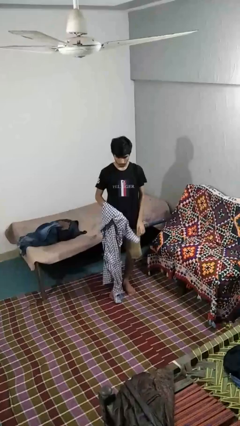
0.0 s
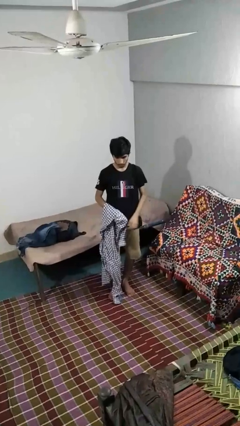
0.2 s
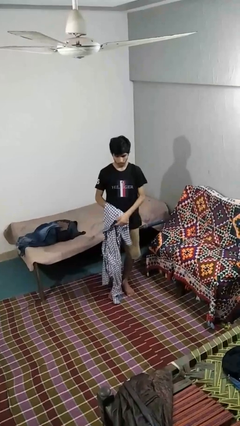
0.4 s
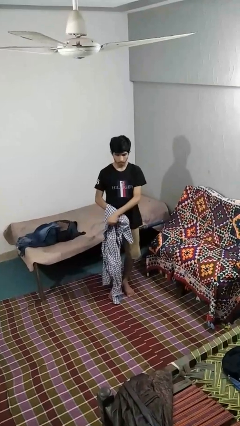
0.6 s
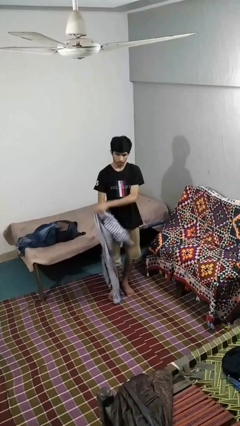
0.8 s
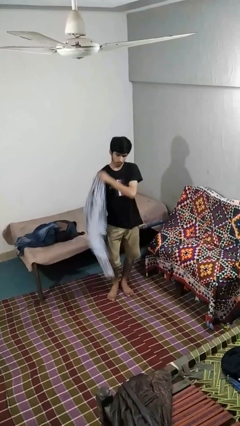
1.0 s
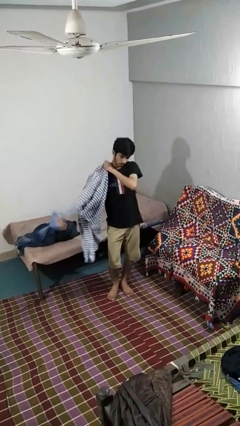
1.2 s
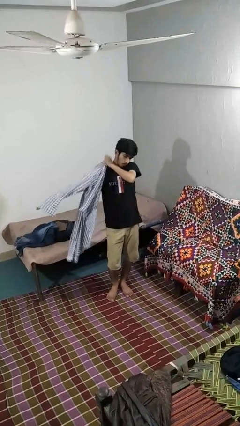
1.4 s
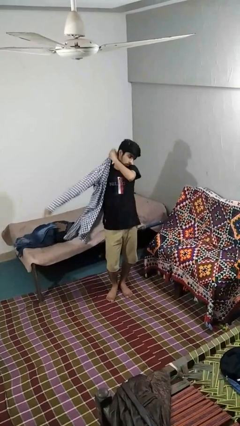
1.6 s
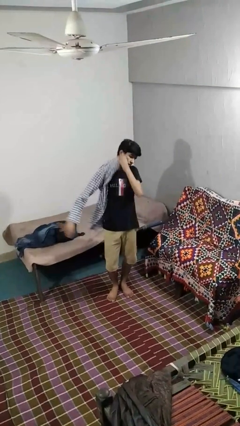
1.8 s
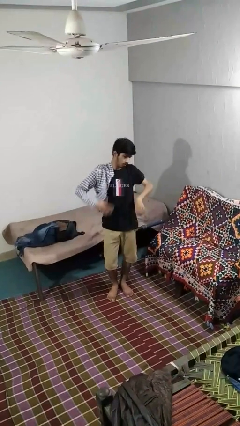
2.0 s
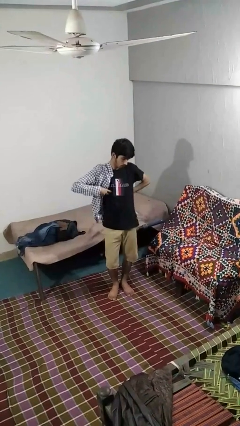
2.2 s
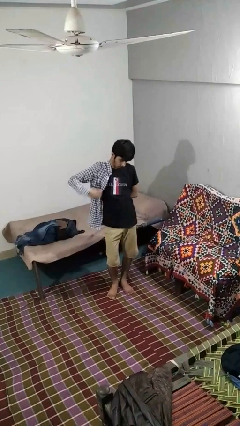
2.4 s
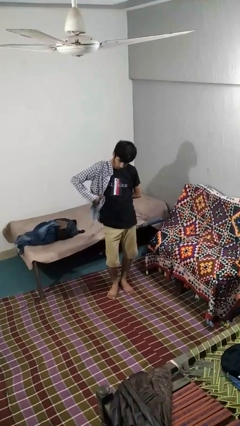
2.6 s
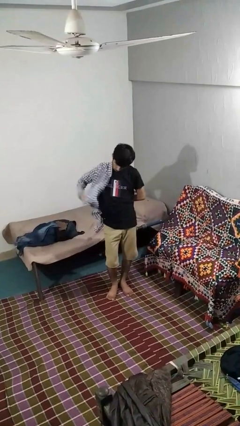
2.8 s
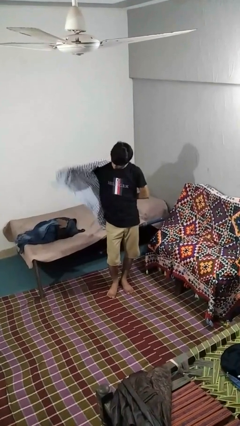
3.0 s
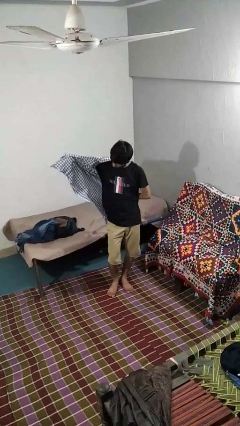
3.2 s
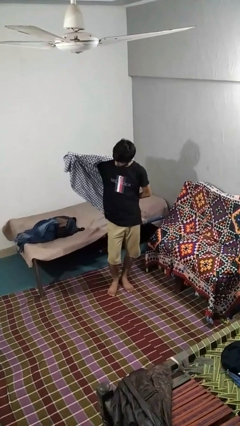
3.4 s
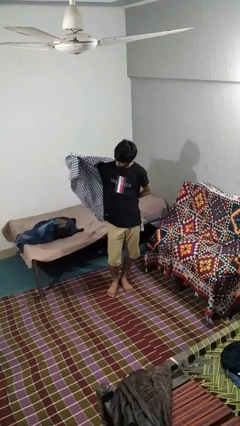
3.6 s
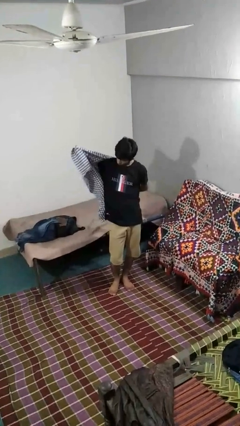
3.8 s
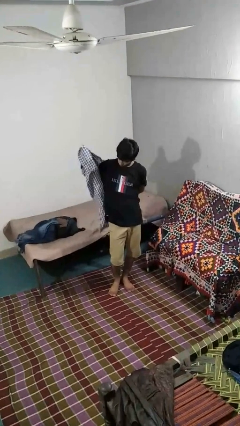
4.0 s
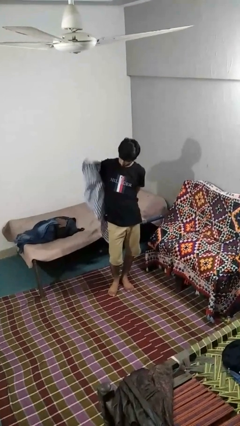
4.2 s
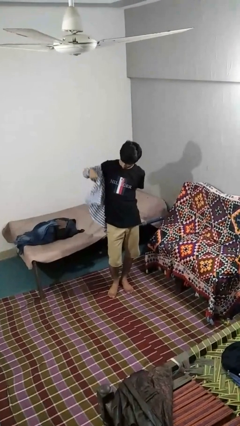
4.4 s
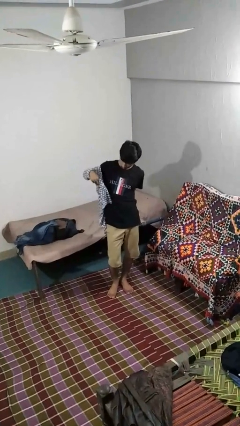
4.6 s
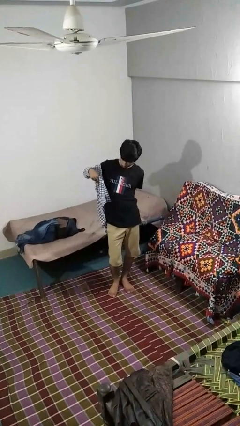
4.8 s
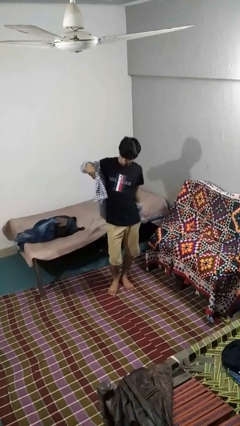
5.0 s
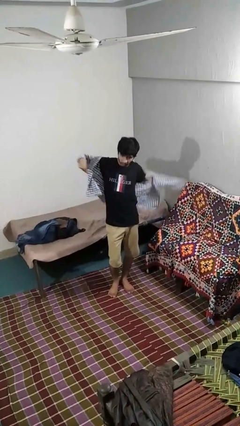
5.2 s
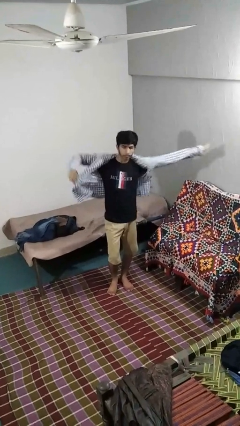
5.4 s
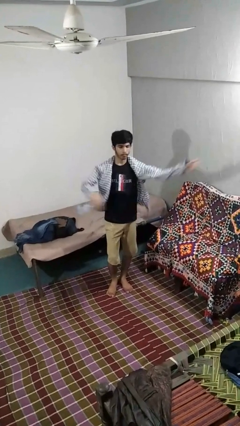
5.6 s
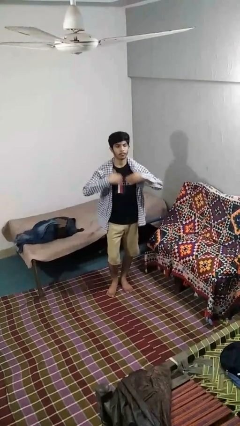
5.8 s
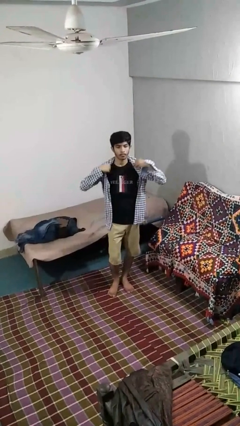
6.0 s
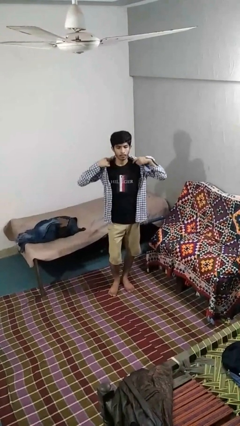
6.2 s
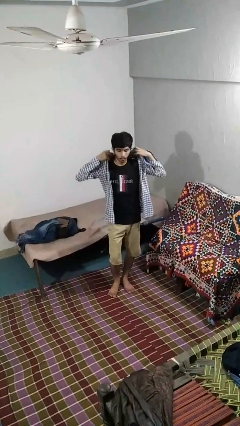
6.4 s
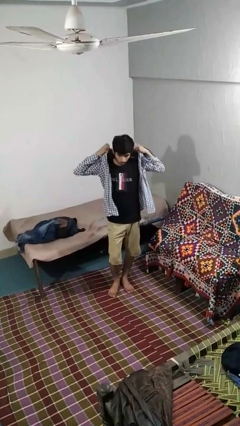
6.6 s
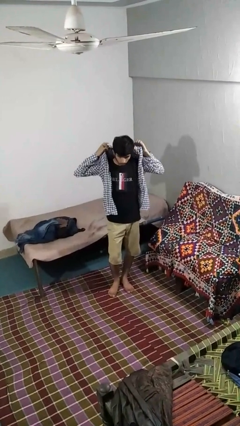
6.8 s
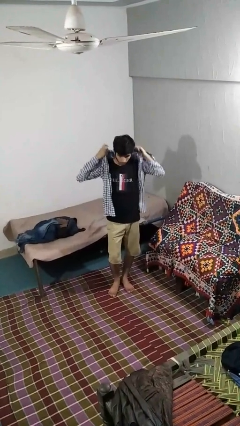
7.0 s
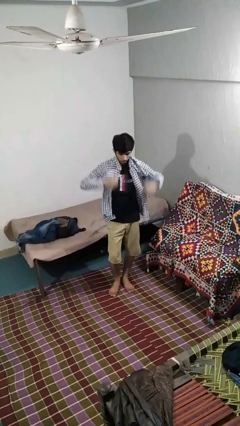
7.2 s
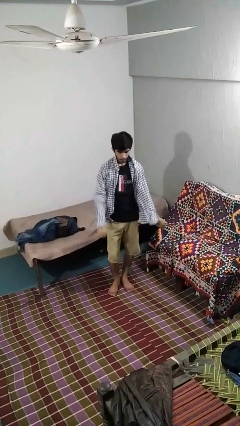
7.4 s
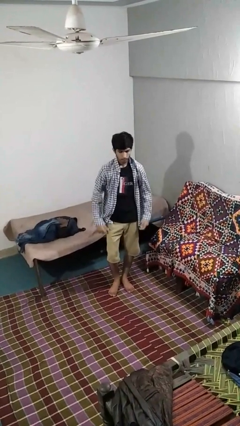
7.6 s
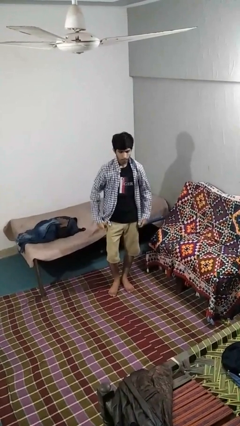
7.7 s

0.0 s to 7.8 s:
person puts on shirt

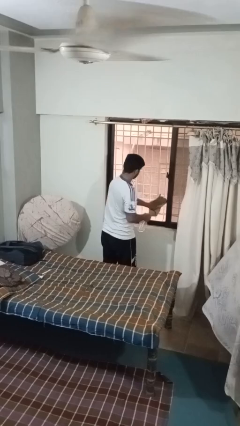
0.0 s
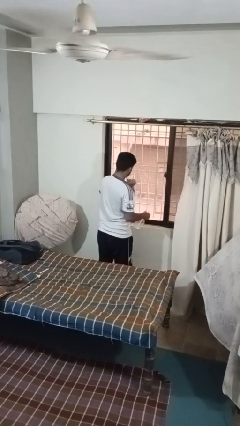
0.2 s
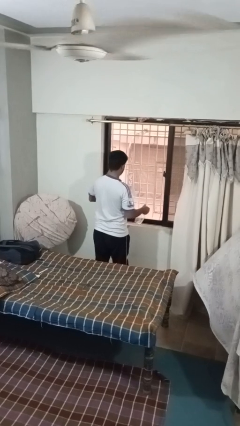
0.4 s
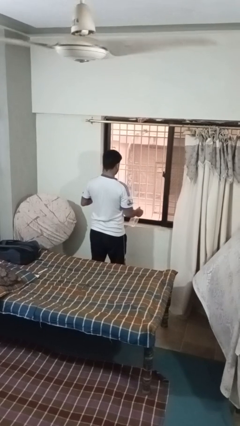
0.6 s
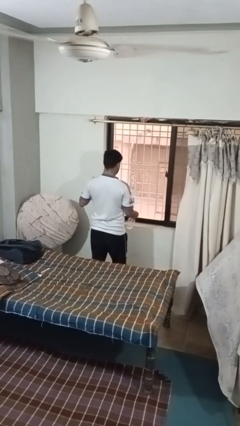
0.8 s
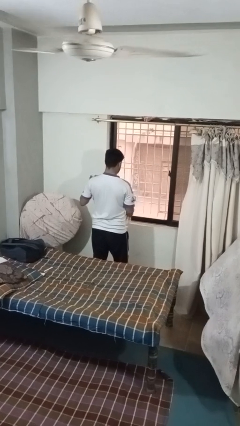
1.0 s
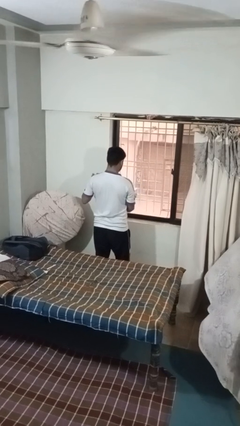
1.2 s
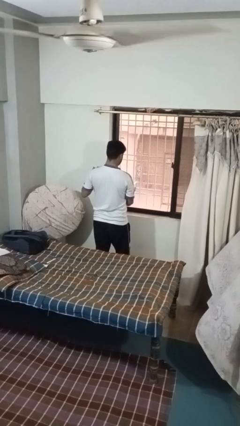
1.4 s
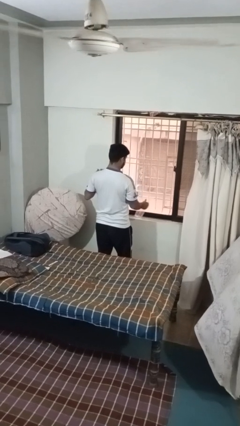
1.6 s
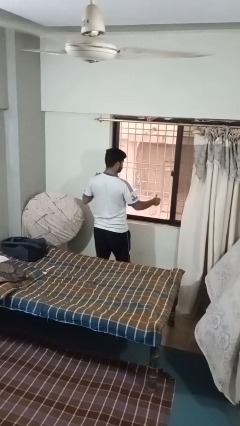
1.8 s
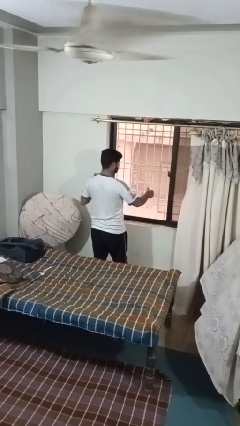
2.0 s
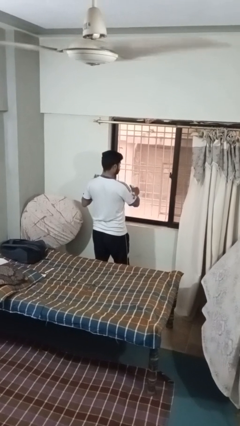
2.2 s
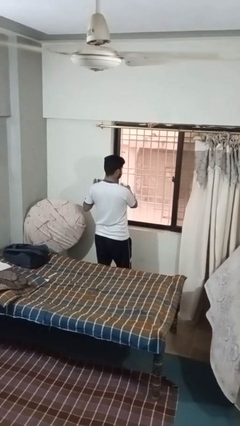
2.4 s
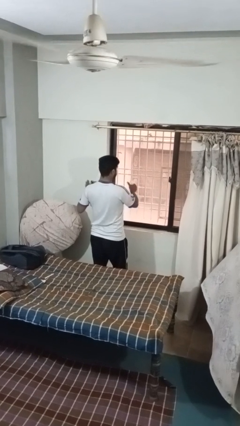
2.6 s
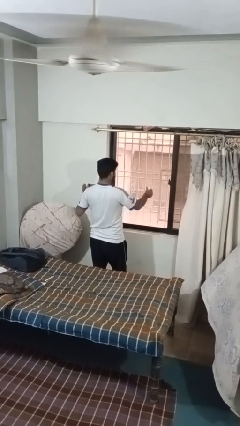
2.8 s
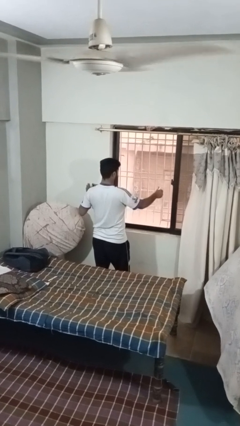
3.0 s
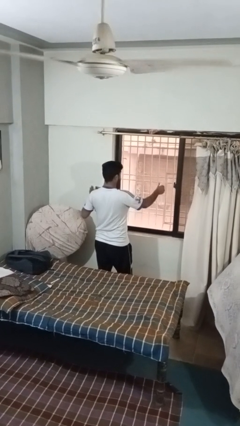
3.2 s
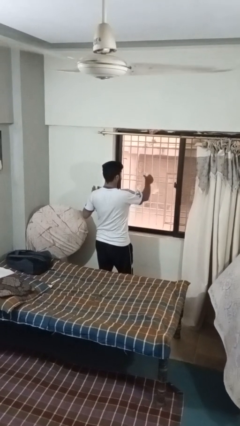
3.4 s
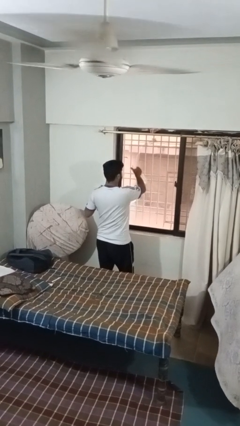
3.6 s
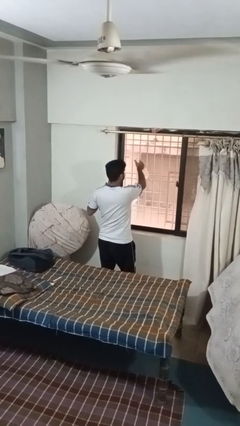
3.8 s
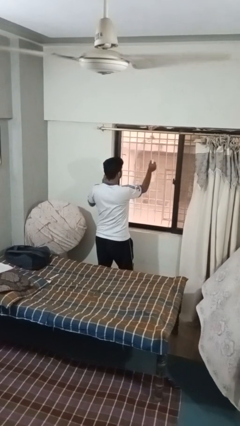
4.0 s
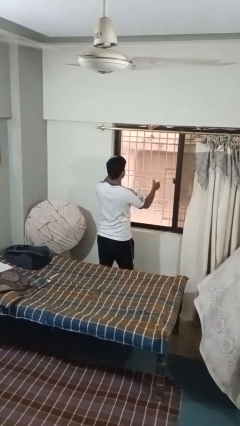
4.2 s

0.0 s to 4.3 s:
person sprays from bottle

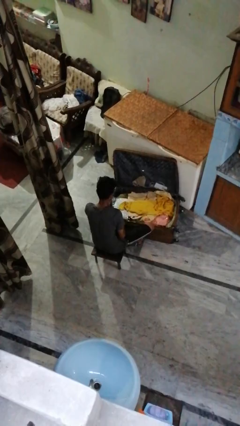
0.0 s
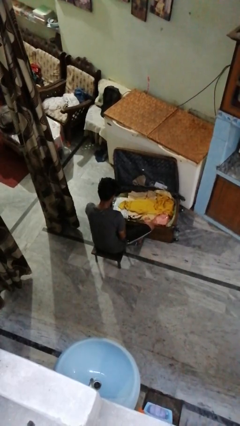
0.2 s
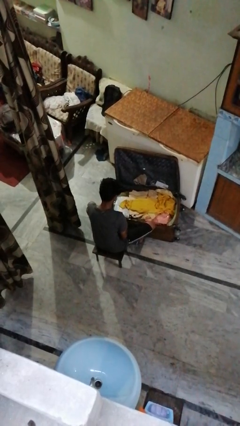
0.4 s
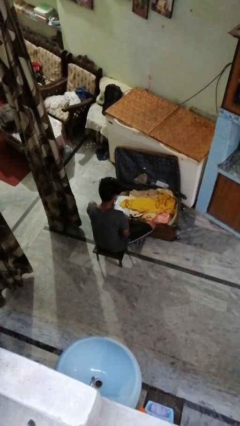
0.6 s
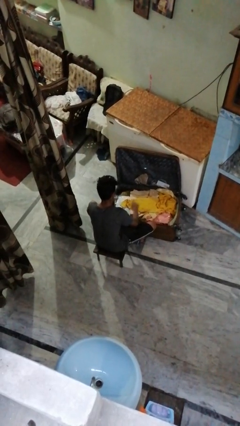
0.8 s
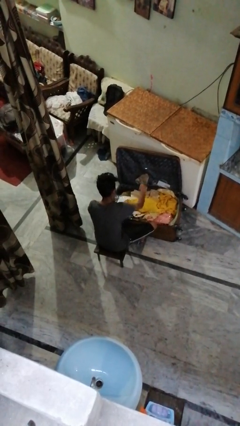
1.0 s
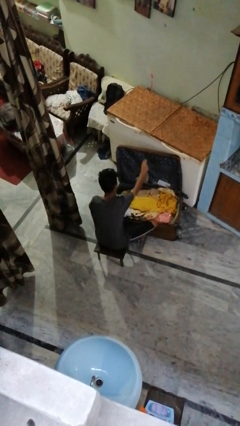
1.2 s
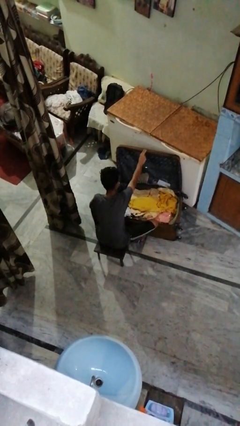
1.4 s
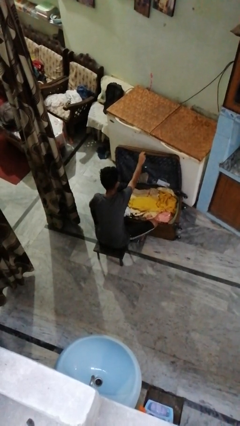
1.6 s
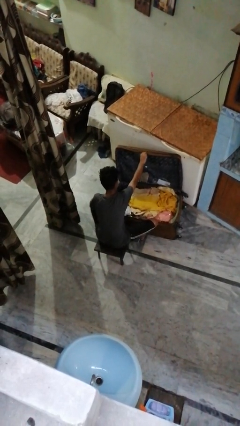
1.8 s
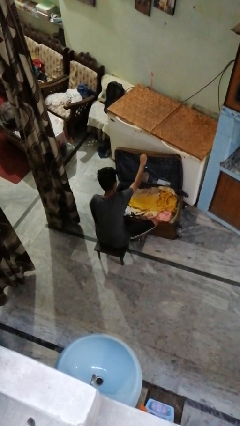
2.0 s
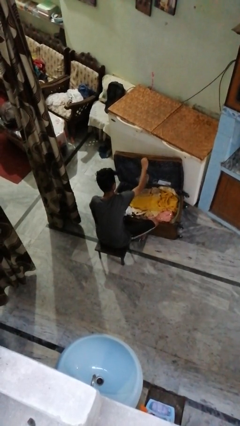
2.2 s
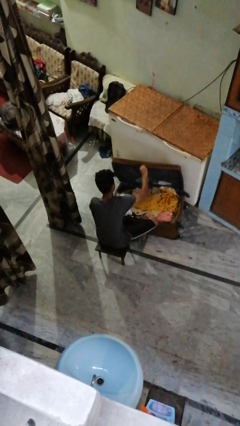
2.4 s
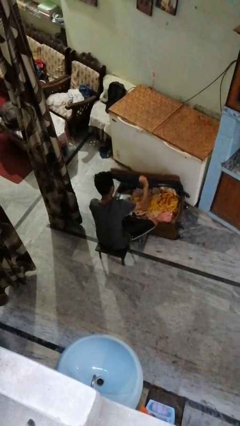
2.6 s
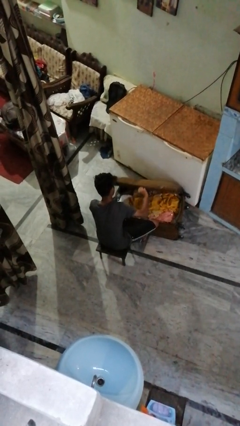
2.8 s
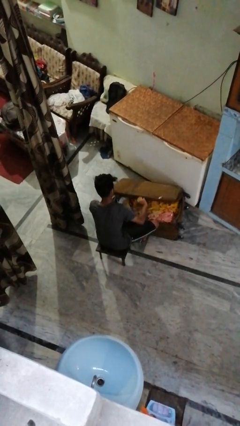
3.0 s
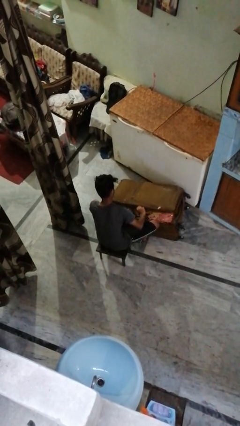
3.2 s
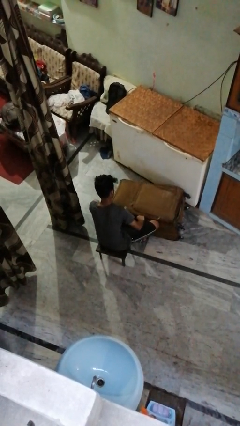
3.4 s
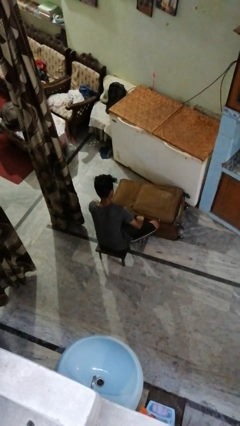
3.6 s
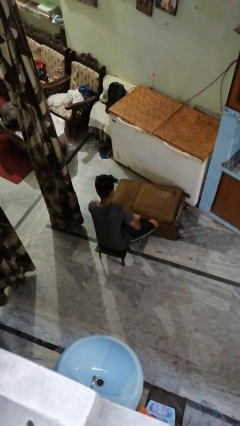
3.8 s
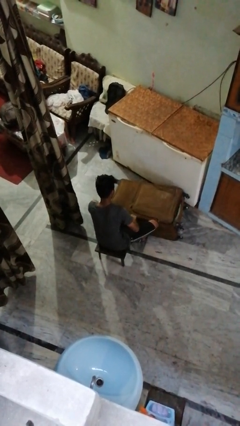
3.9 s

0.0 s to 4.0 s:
person closes suitcase

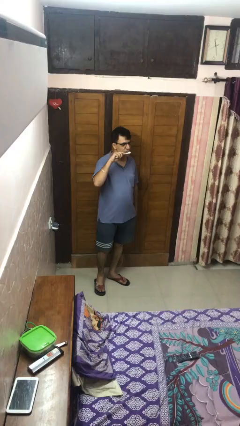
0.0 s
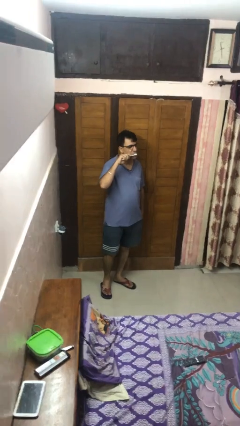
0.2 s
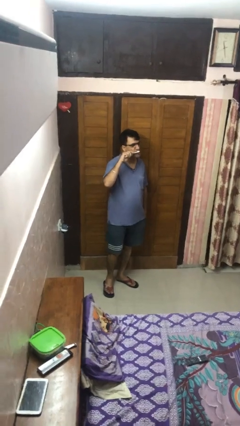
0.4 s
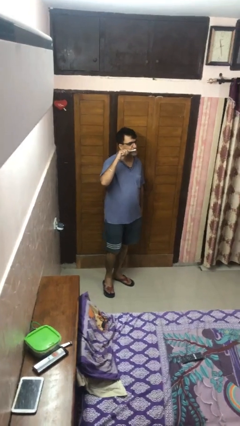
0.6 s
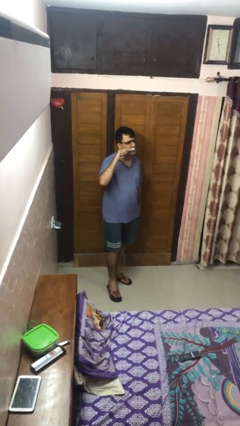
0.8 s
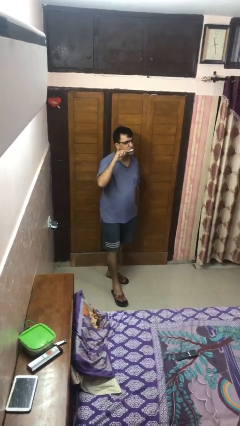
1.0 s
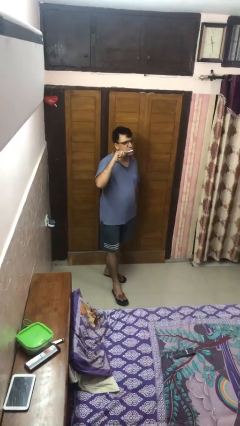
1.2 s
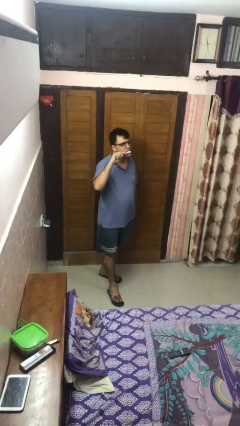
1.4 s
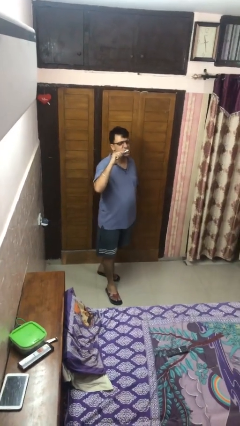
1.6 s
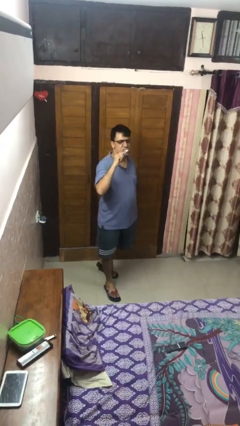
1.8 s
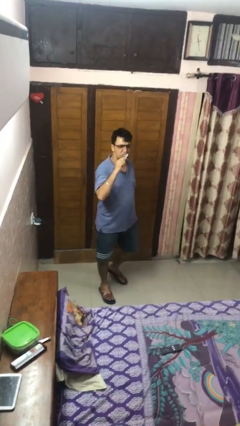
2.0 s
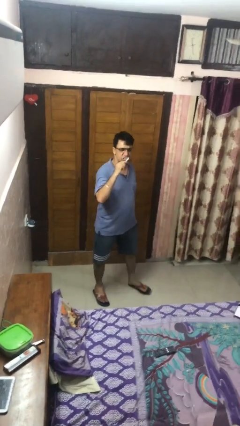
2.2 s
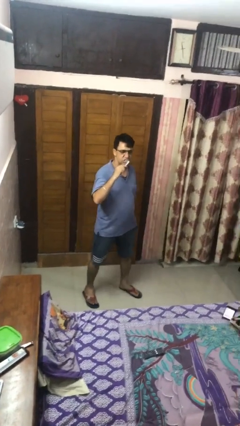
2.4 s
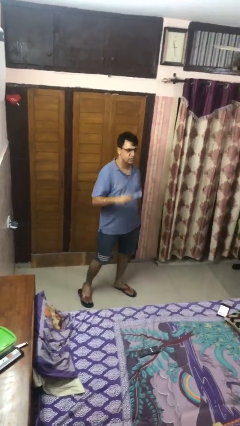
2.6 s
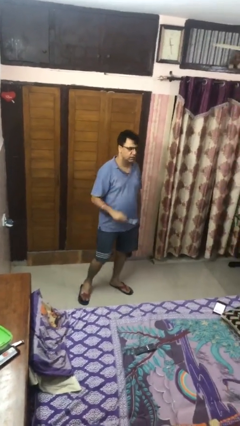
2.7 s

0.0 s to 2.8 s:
person brushes teeth
